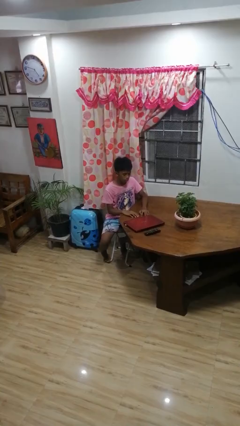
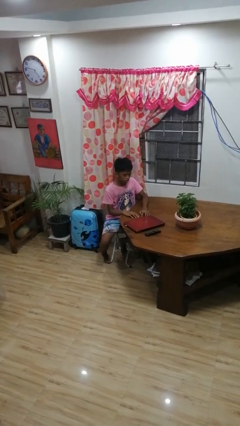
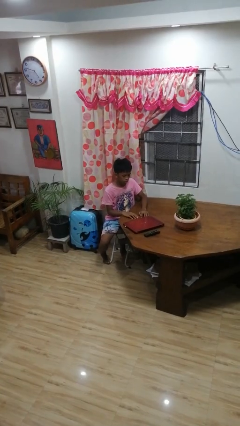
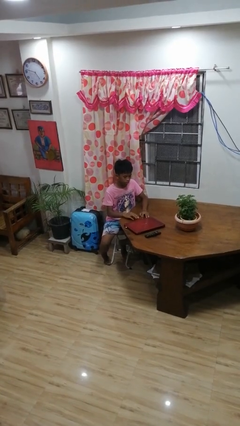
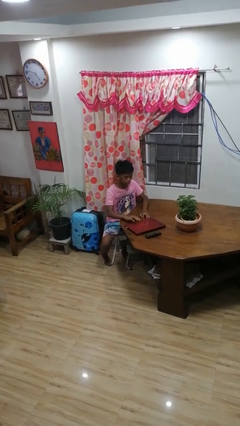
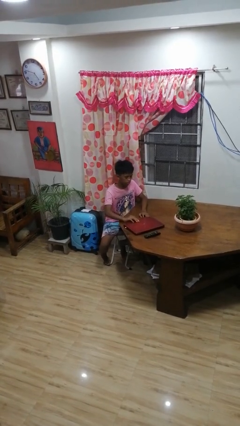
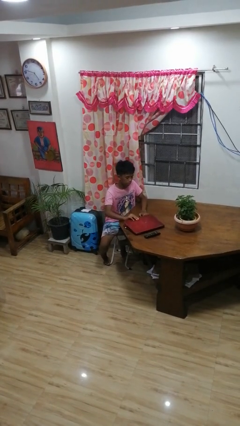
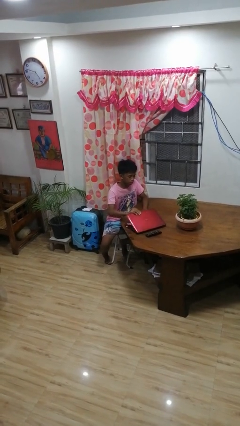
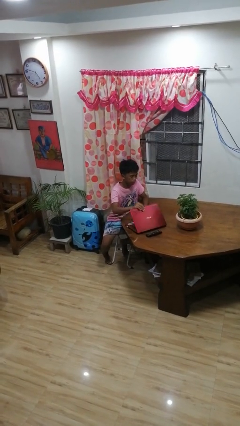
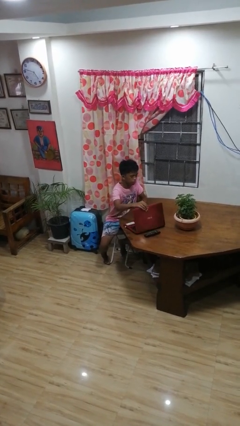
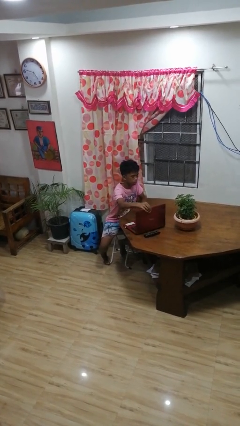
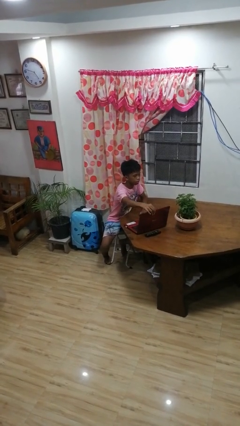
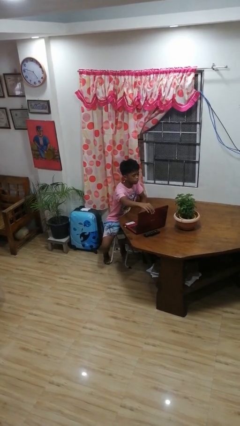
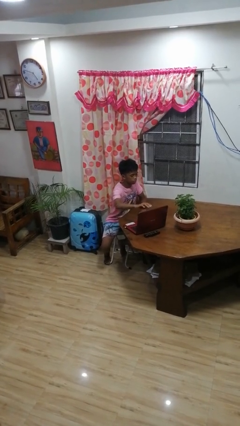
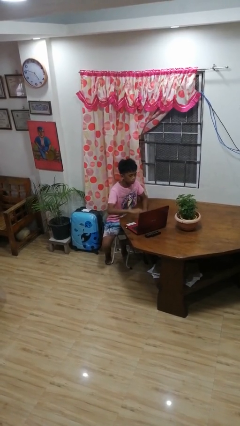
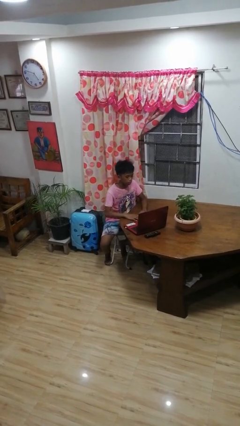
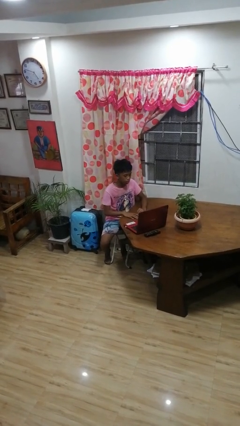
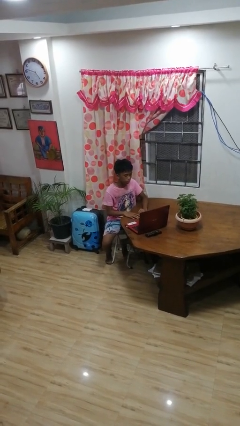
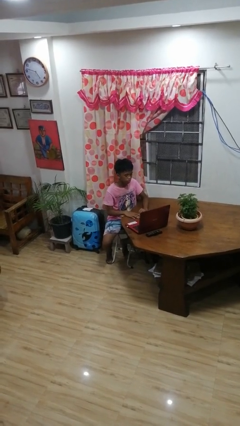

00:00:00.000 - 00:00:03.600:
person opens laptop

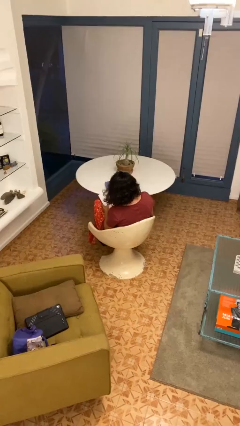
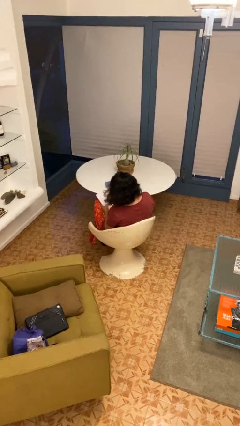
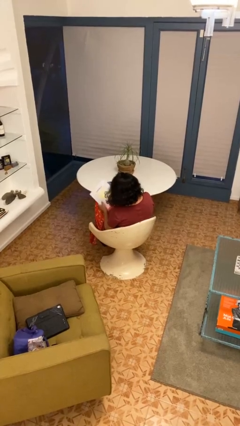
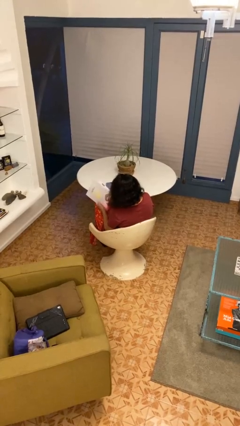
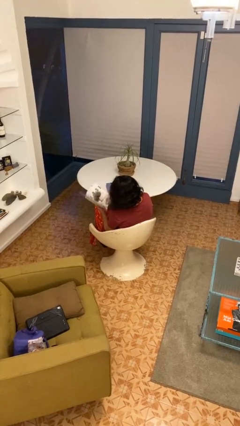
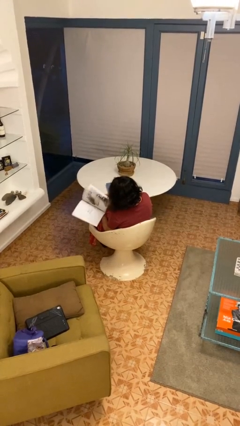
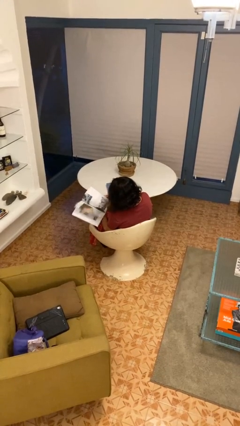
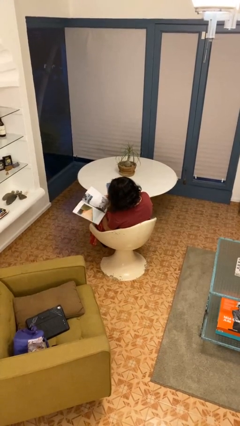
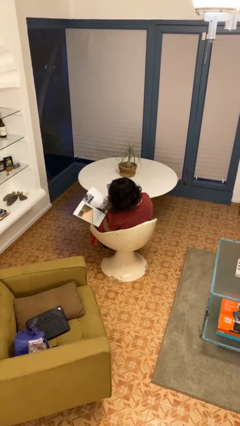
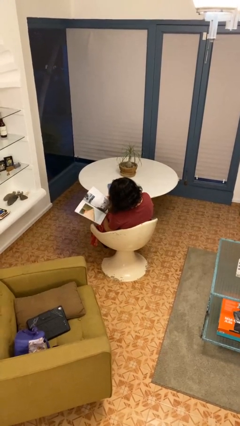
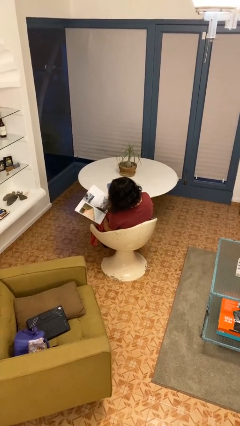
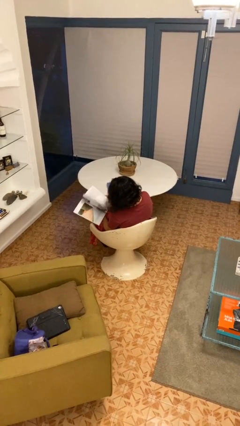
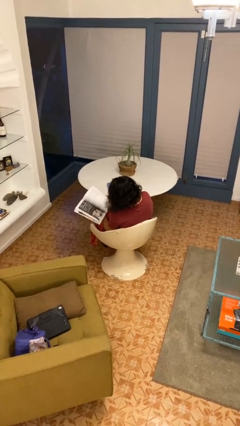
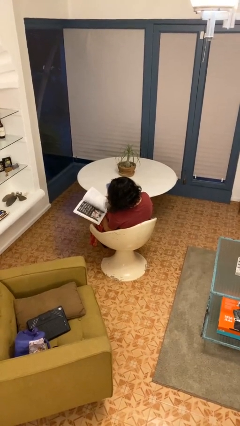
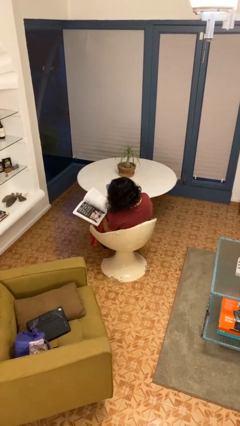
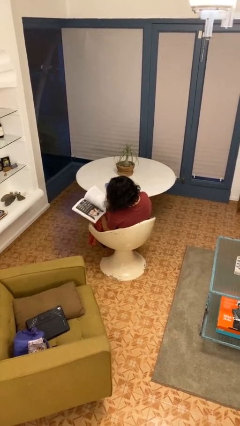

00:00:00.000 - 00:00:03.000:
person reads magazine

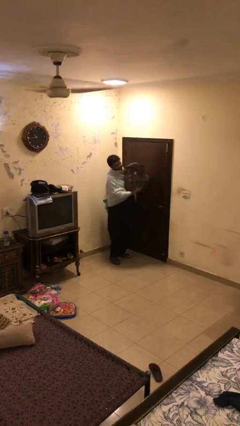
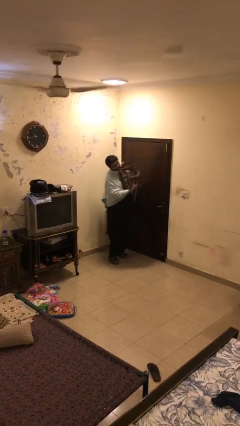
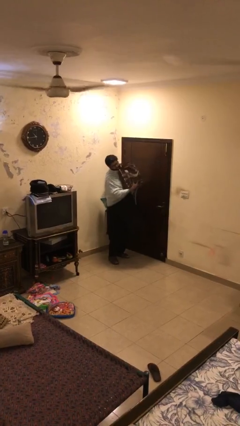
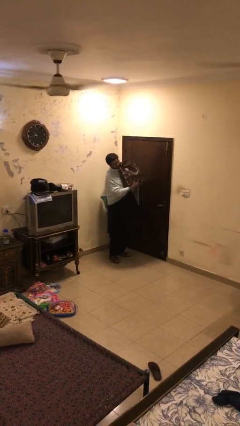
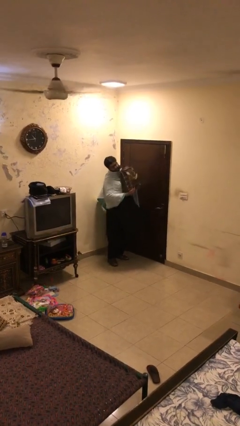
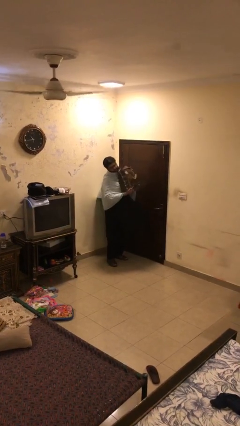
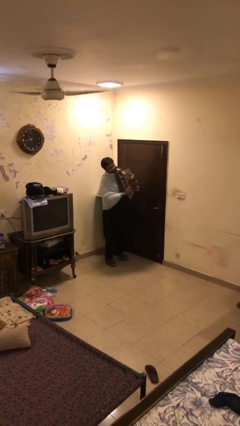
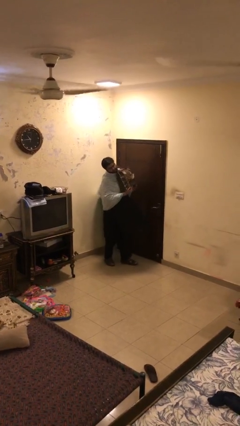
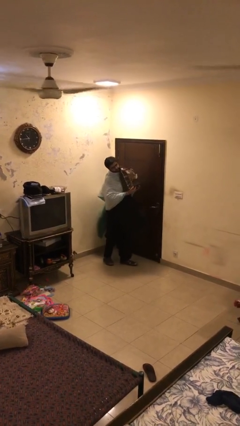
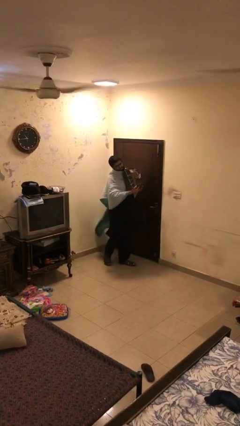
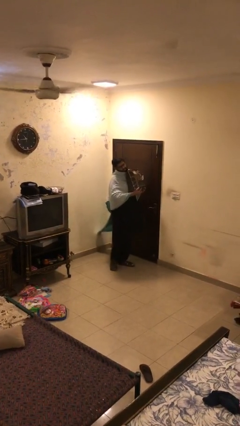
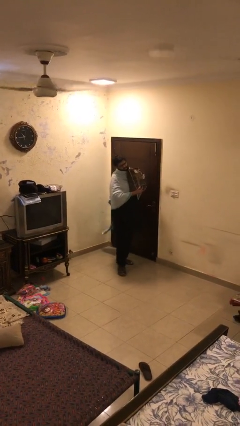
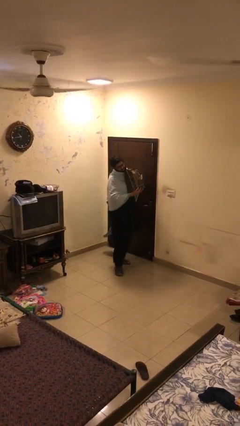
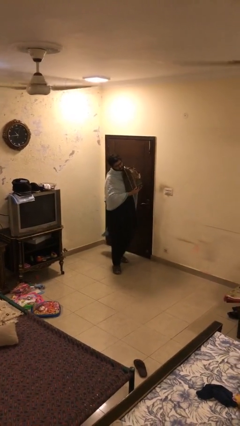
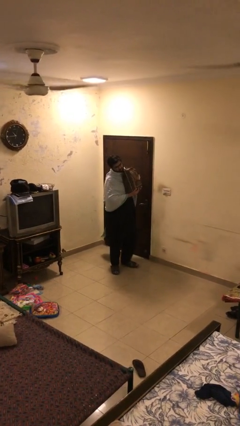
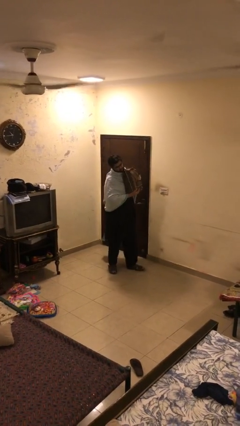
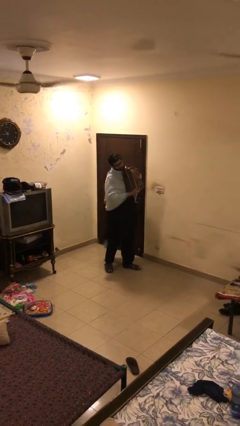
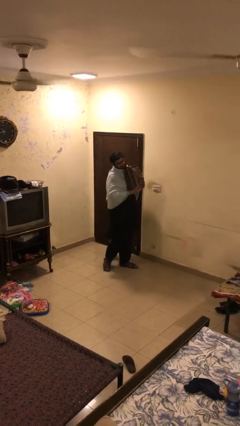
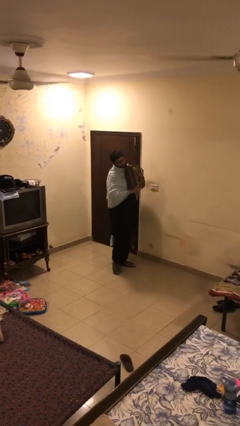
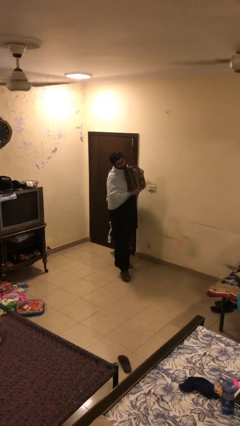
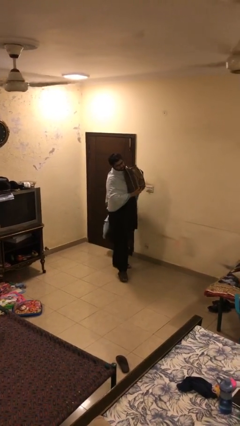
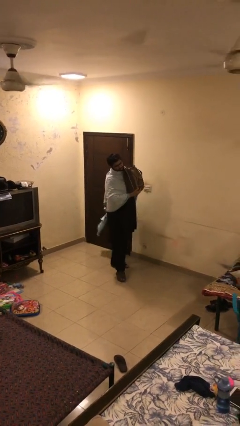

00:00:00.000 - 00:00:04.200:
person carries heavy object

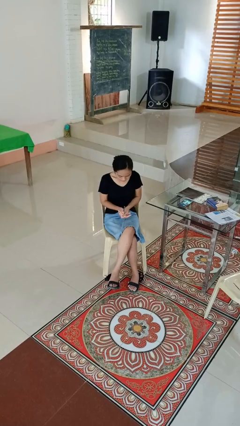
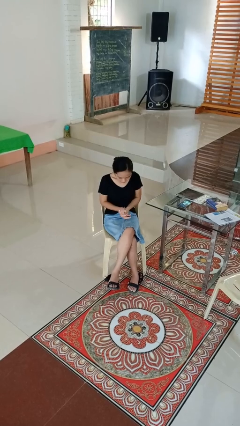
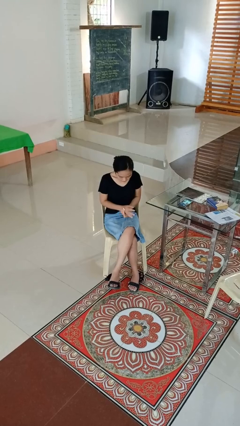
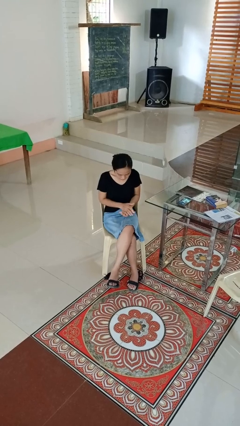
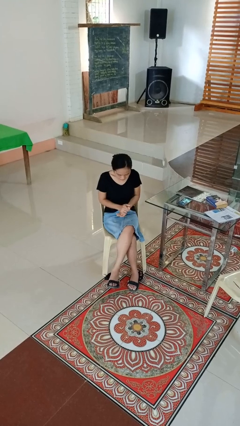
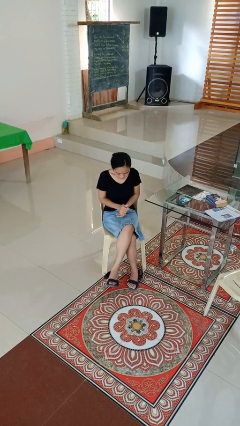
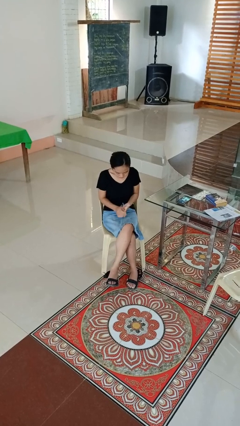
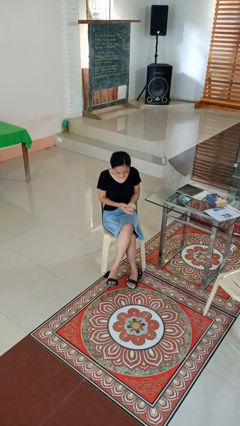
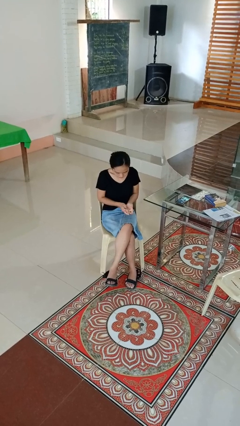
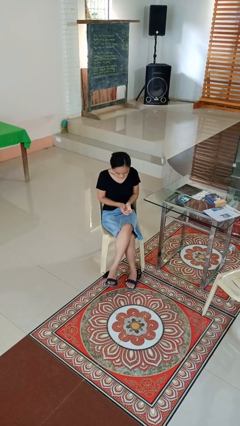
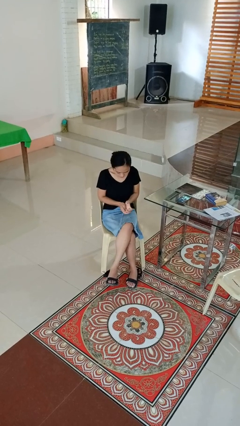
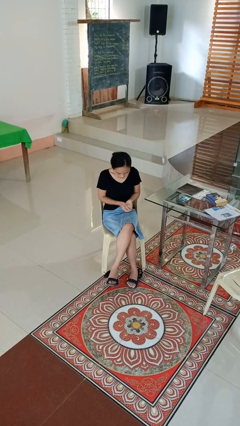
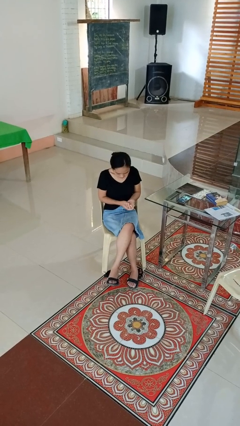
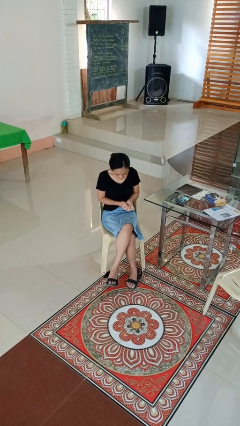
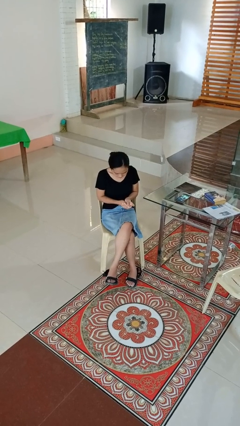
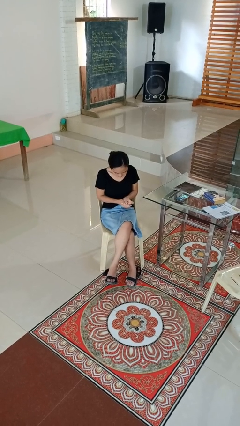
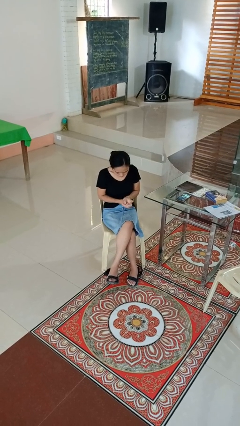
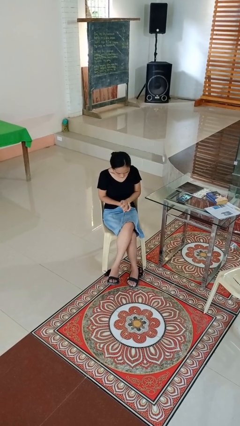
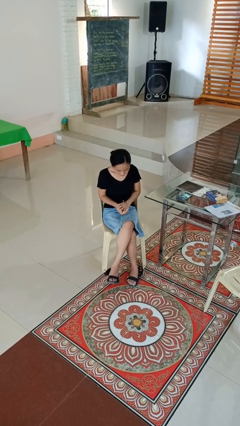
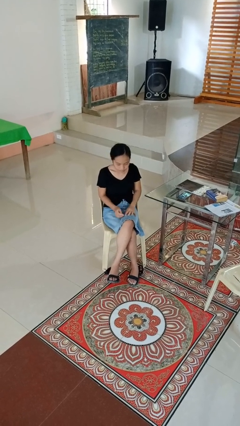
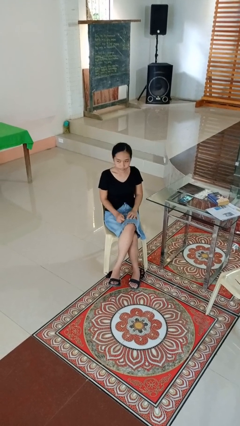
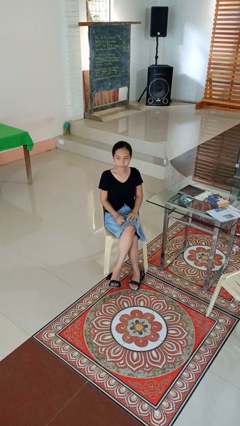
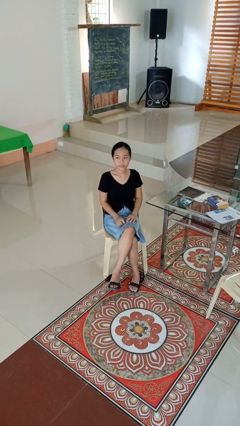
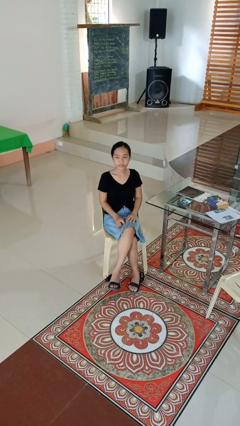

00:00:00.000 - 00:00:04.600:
person looks at hands in lap

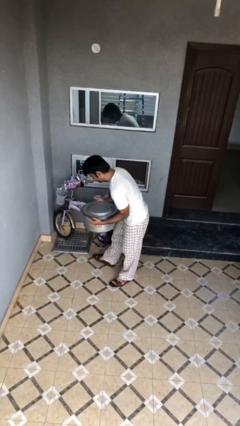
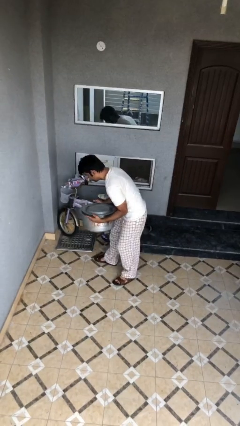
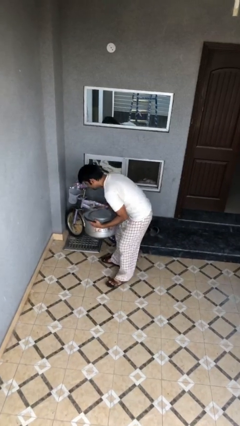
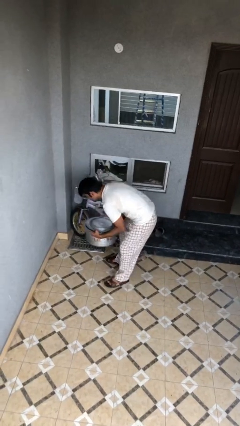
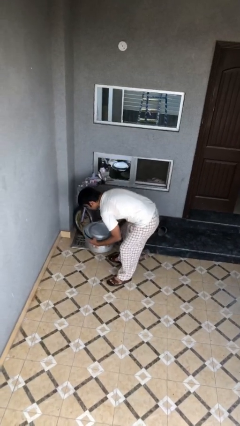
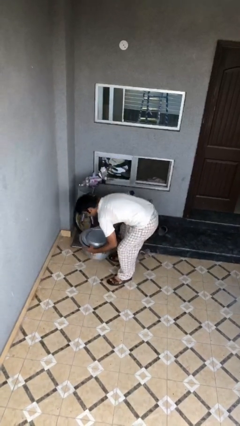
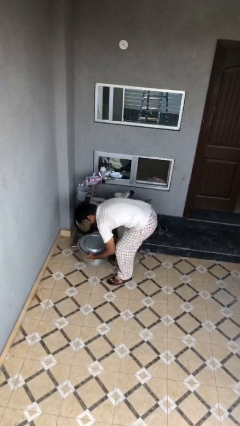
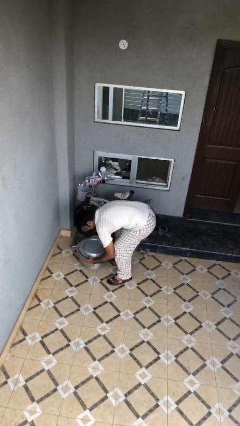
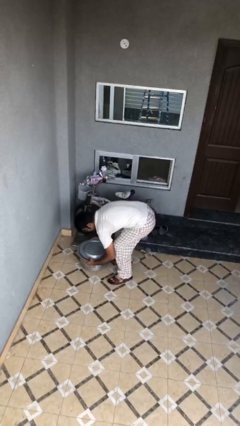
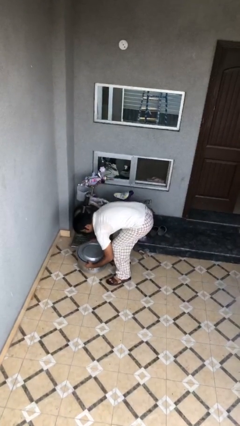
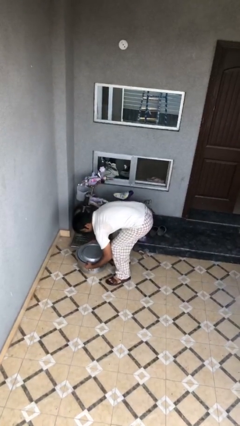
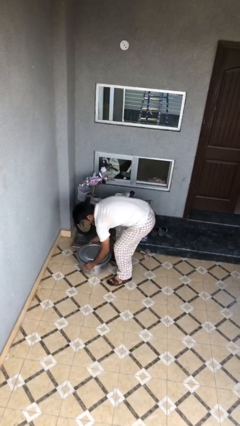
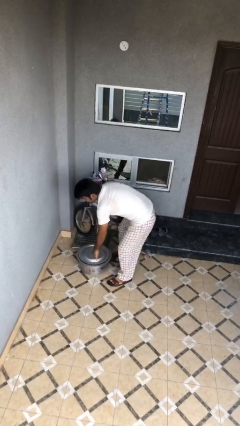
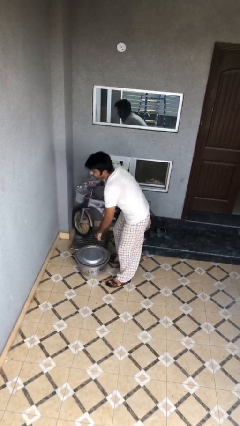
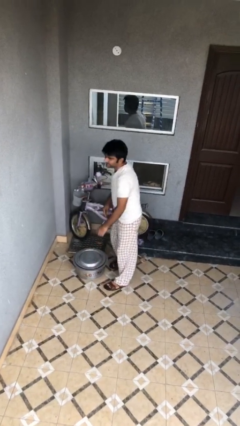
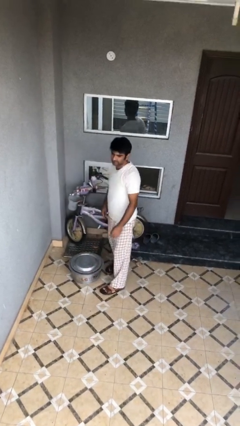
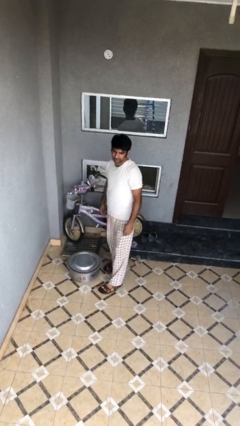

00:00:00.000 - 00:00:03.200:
person puts down object on floor
